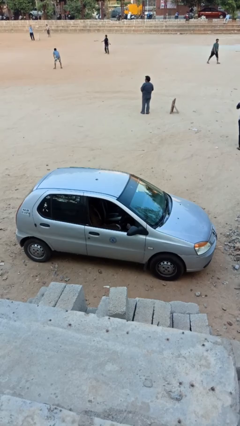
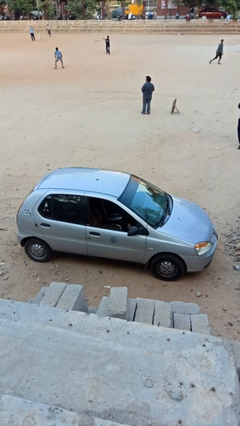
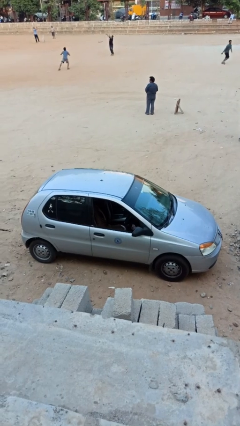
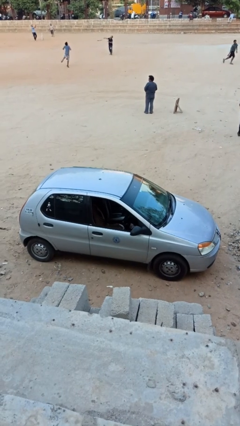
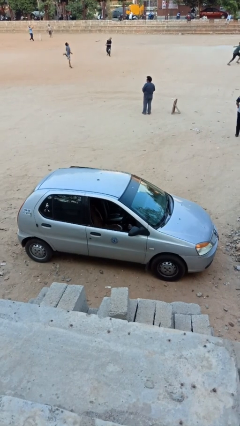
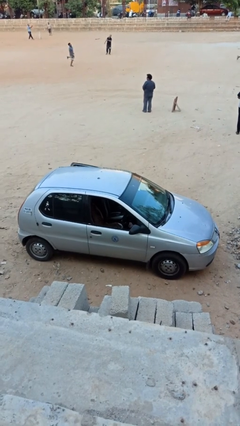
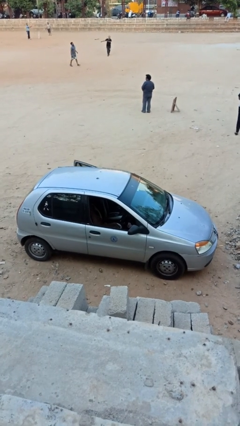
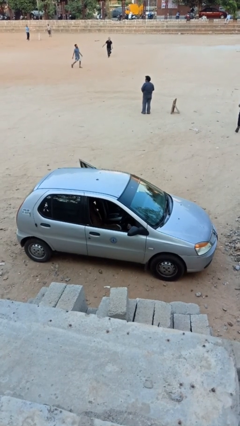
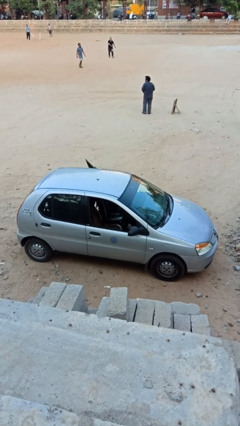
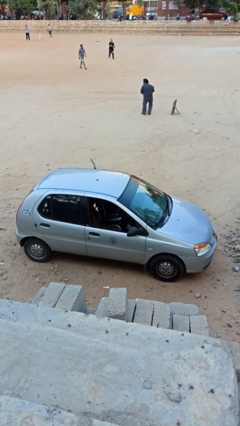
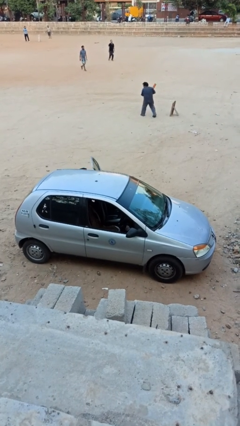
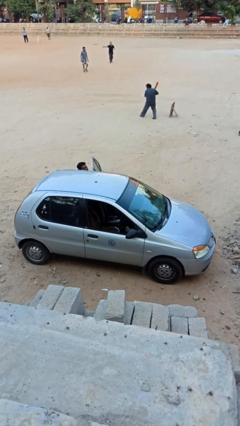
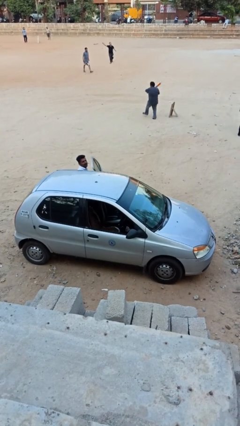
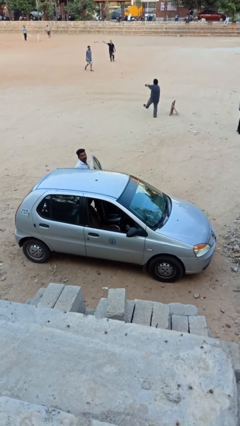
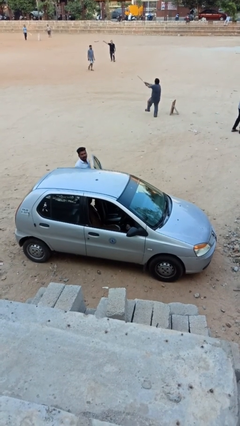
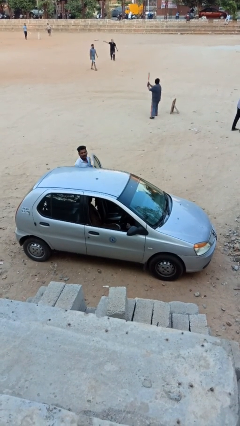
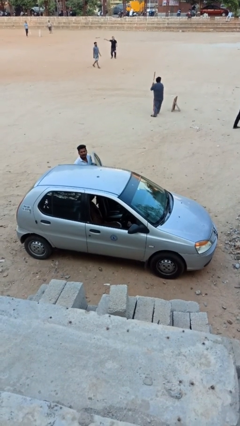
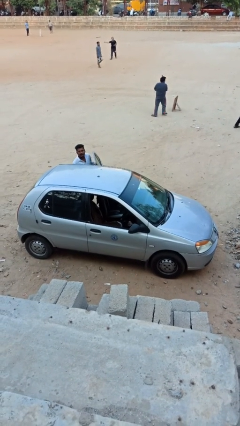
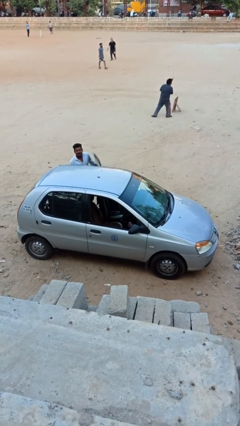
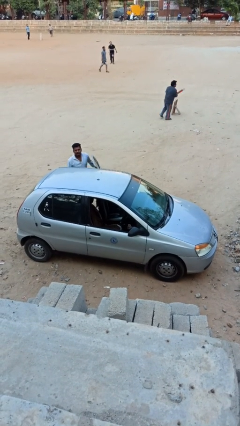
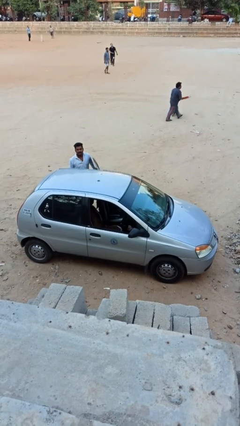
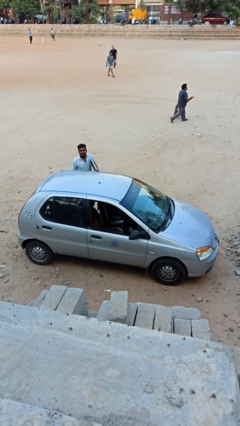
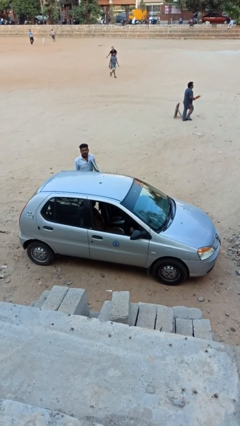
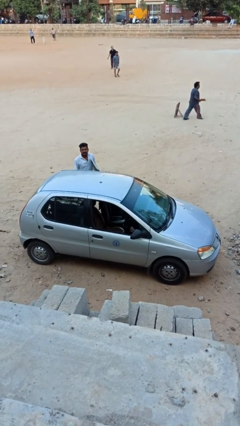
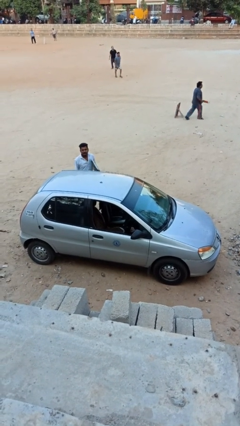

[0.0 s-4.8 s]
car drops off person

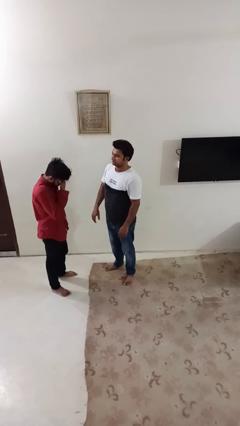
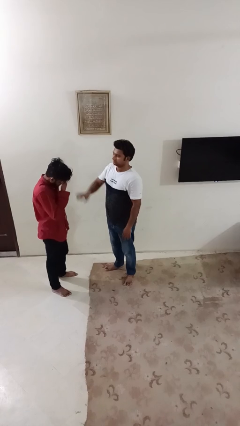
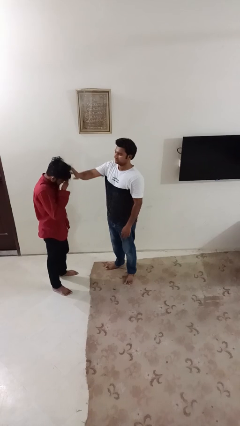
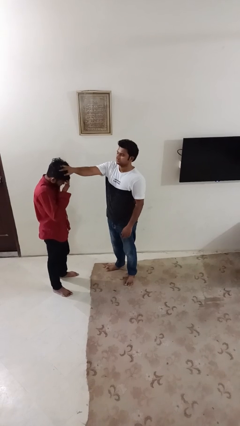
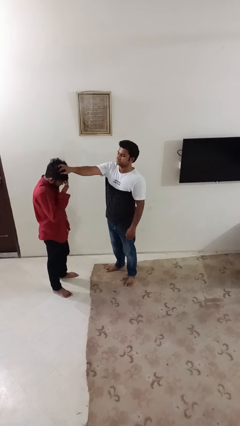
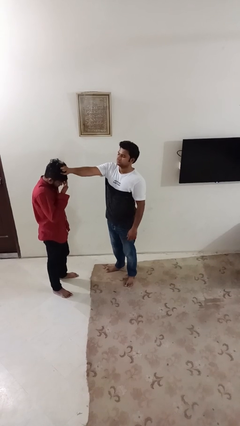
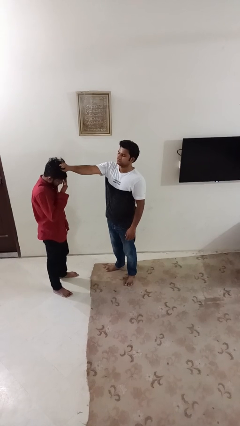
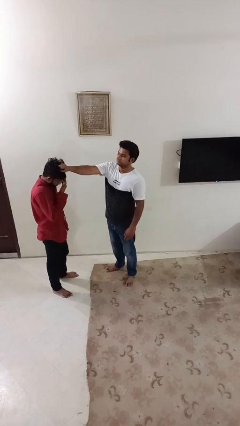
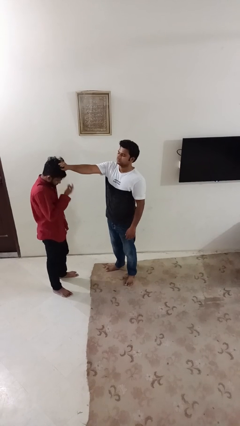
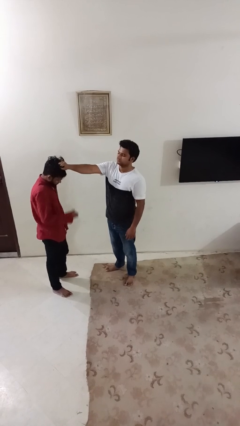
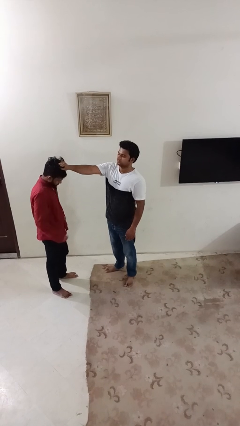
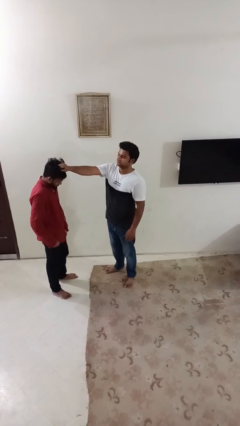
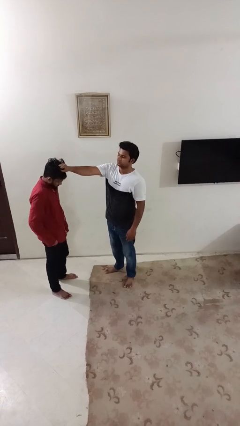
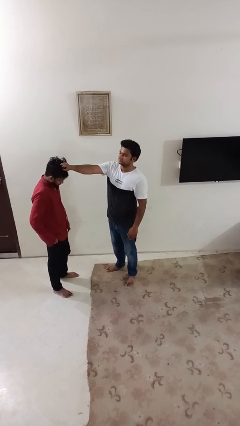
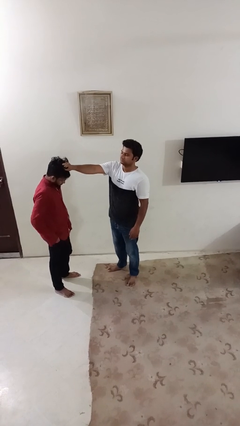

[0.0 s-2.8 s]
person grabs person by hair

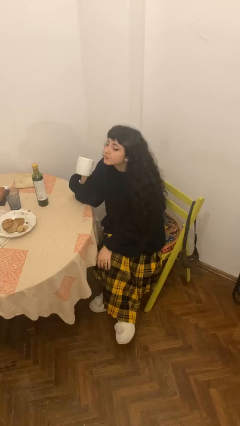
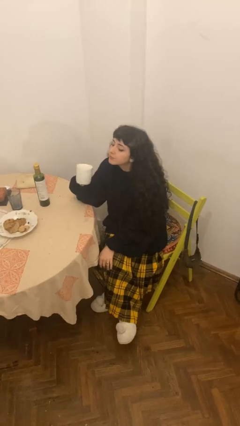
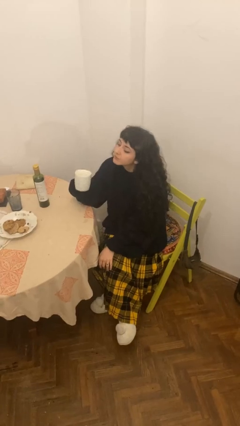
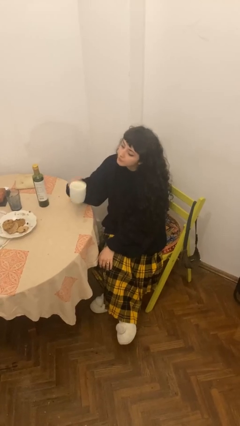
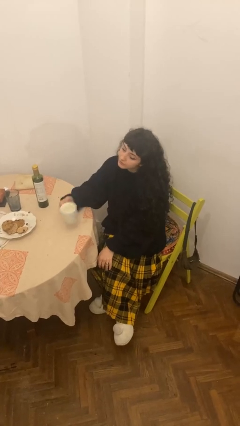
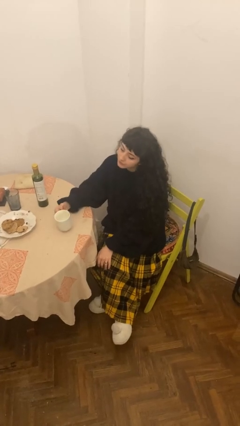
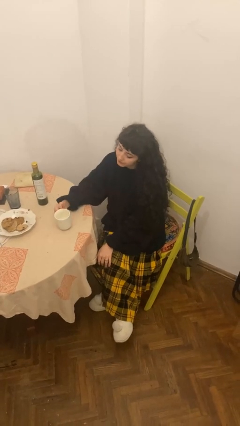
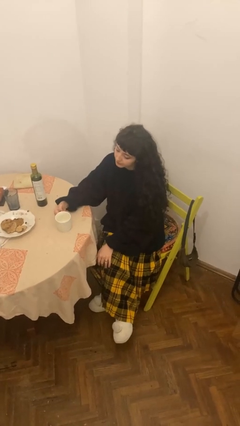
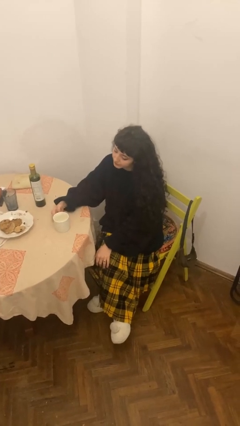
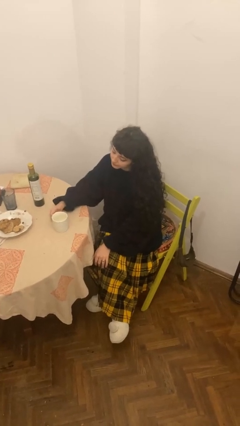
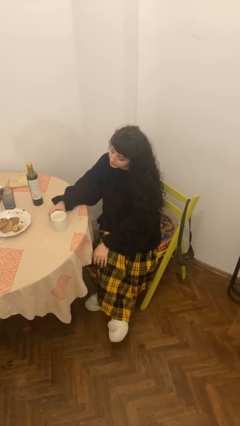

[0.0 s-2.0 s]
person puts down object on table

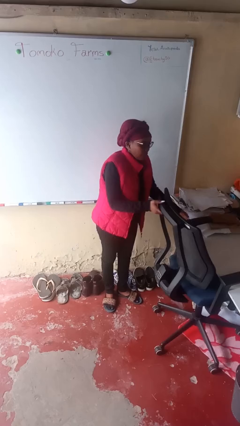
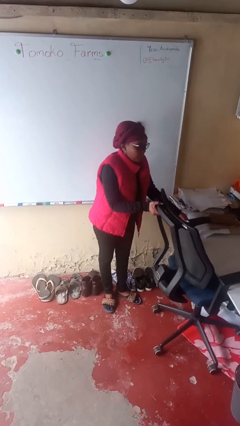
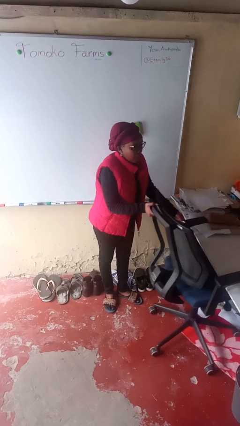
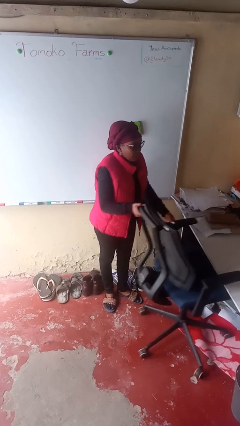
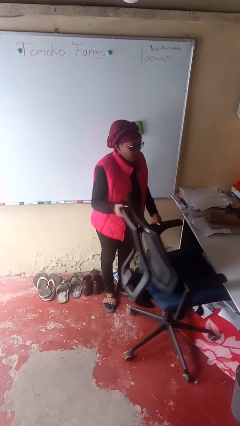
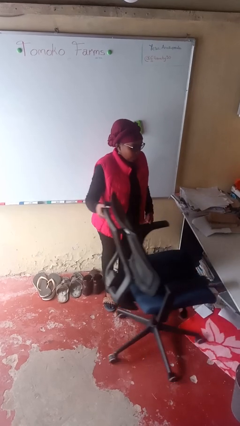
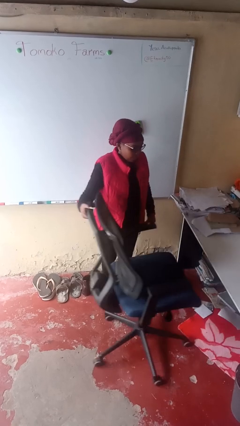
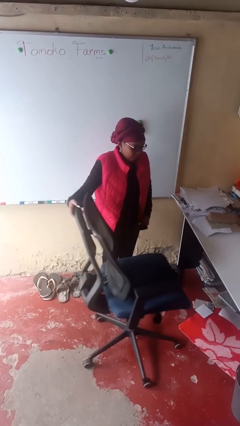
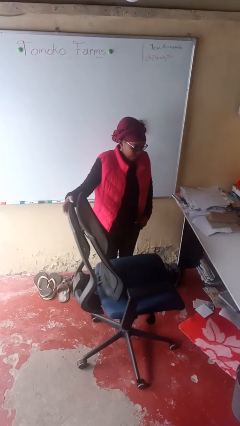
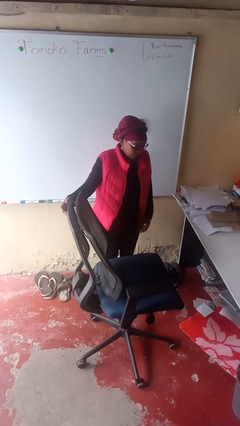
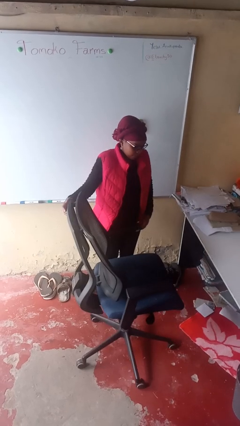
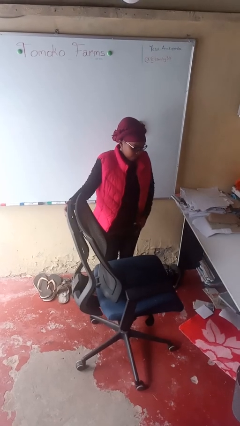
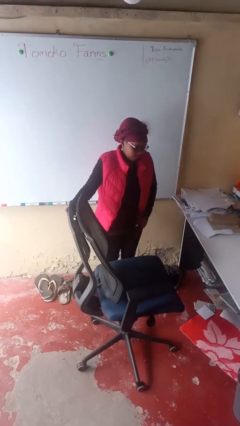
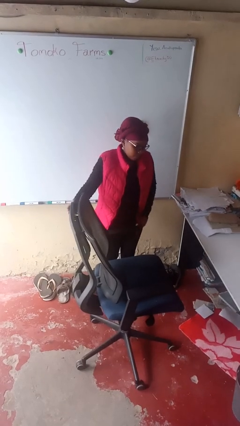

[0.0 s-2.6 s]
person pulls out chair

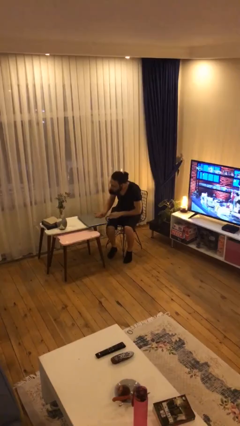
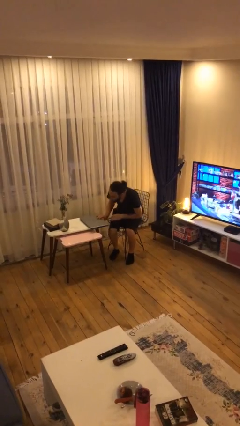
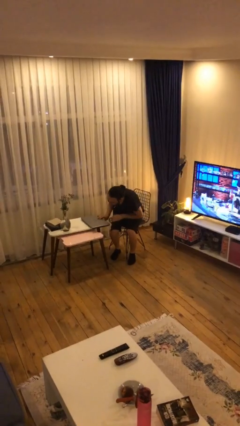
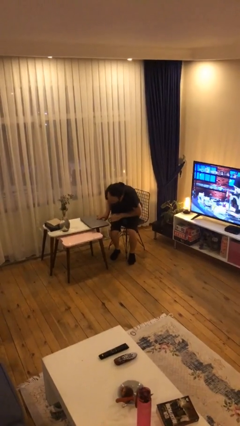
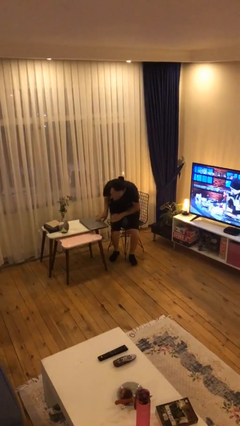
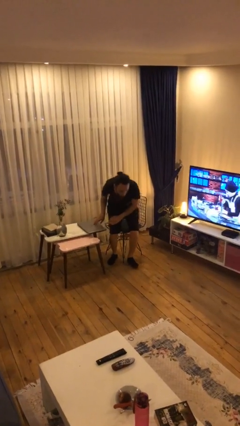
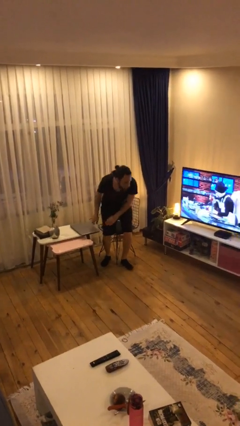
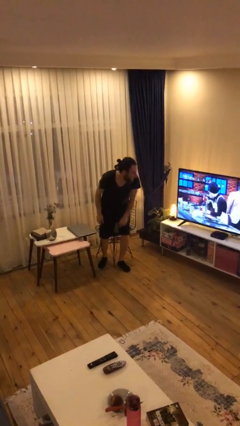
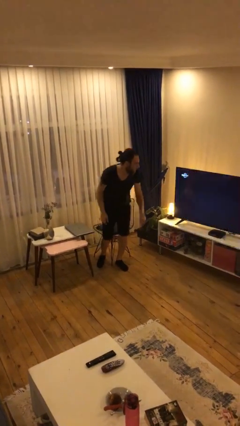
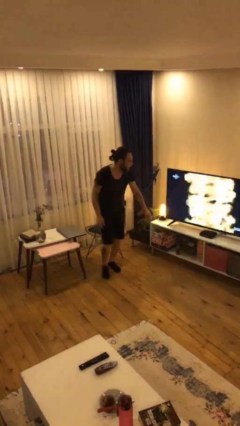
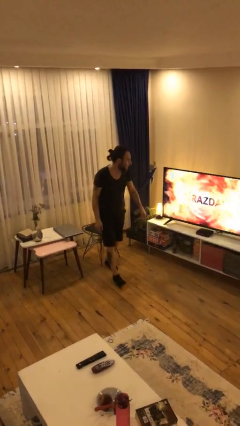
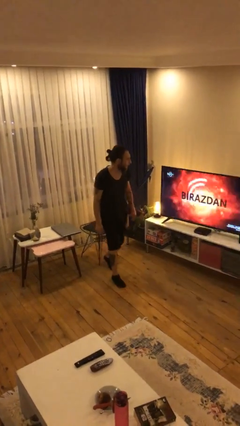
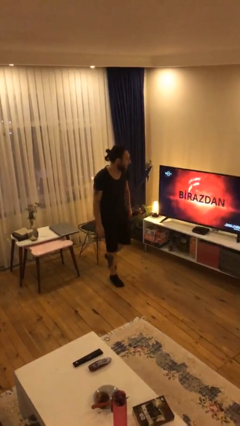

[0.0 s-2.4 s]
person stands up

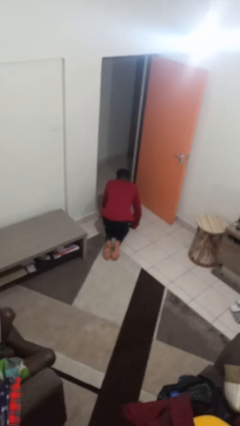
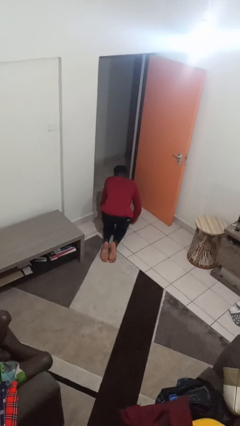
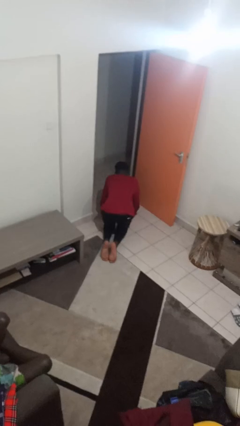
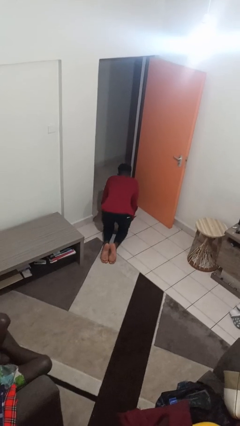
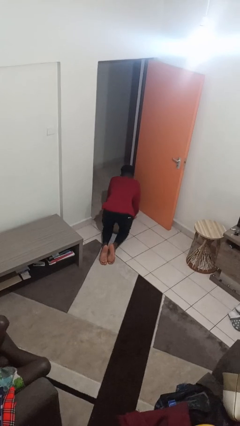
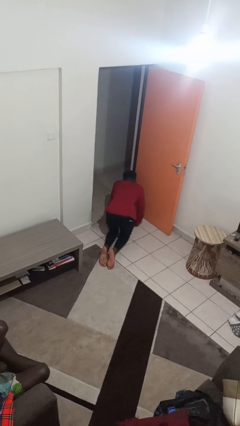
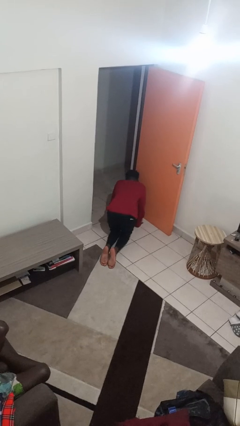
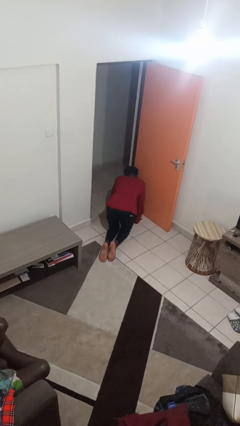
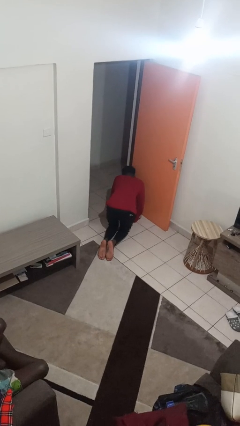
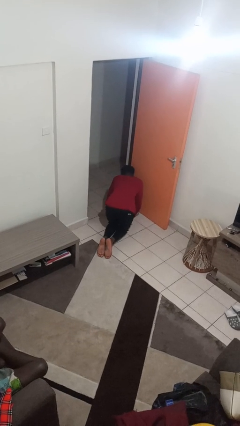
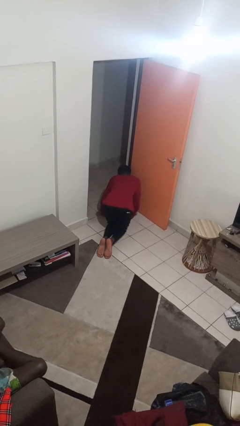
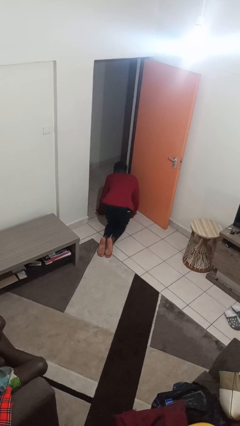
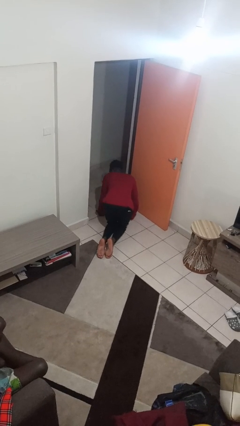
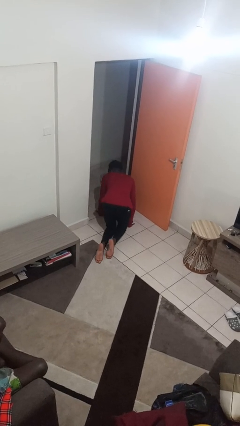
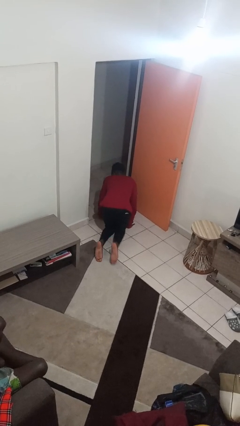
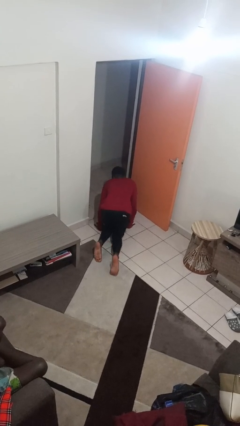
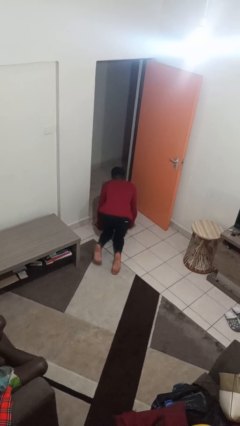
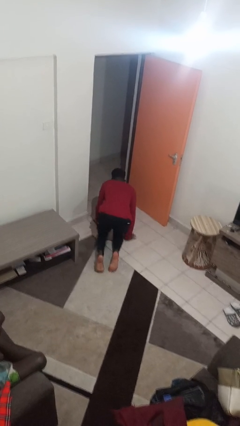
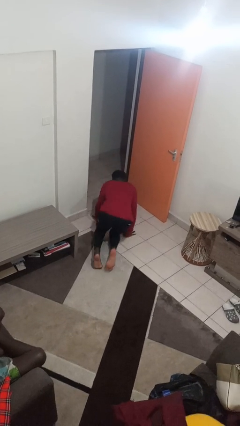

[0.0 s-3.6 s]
person crawls
